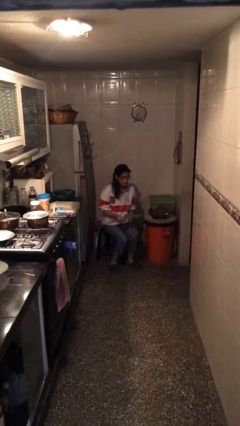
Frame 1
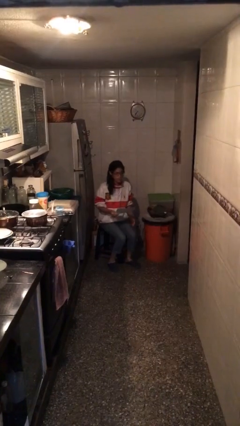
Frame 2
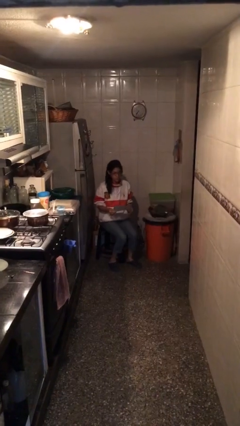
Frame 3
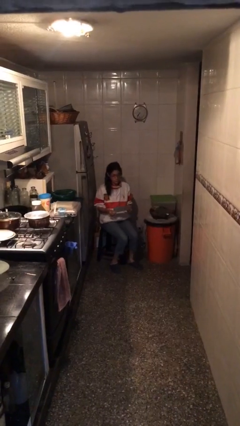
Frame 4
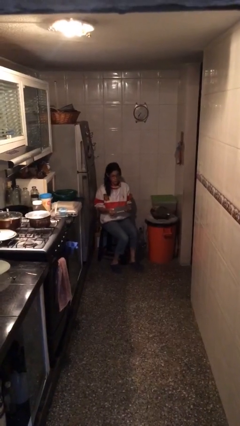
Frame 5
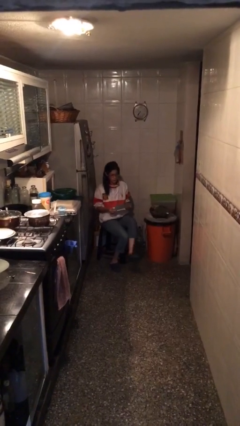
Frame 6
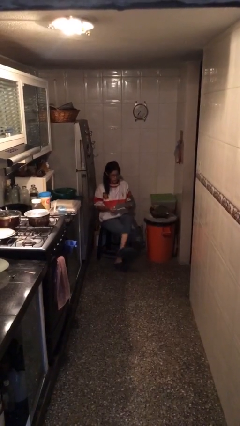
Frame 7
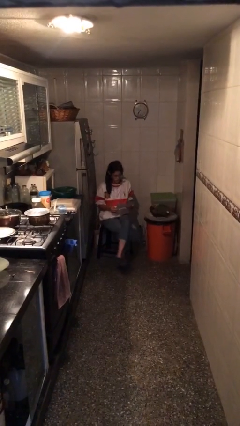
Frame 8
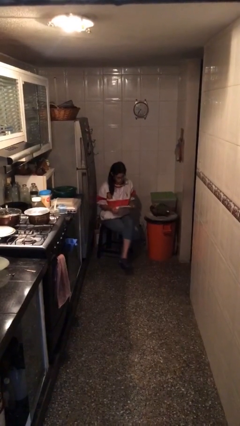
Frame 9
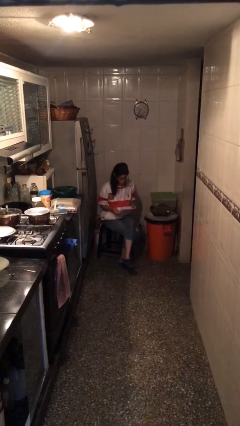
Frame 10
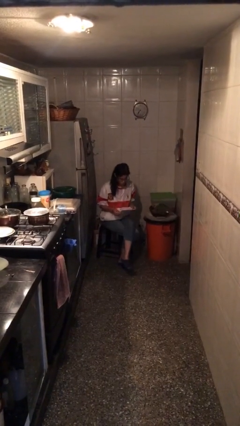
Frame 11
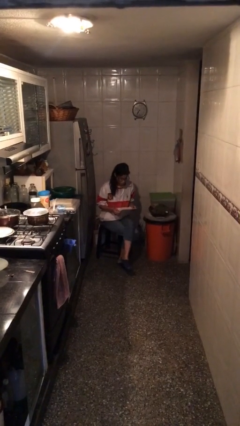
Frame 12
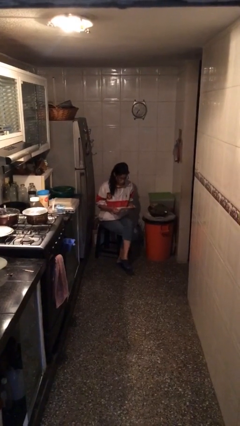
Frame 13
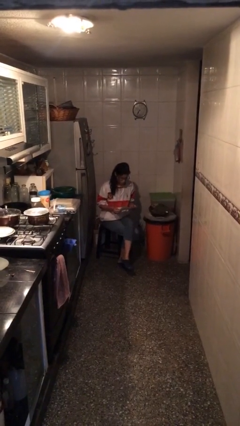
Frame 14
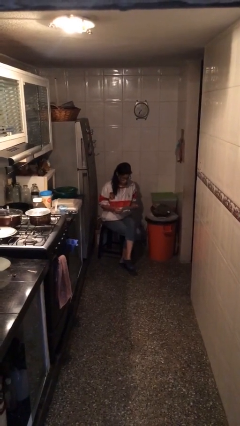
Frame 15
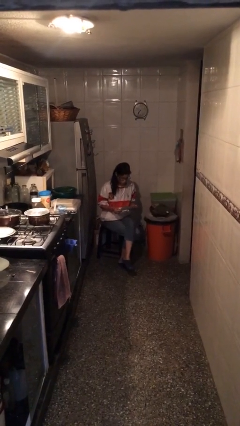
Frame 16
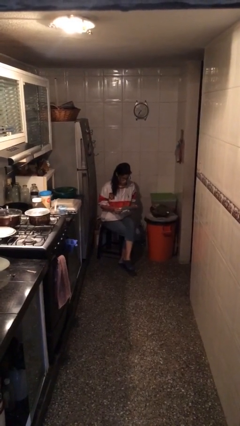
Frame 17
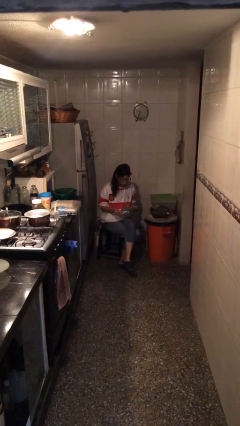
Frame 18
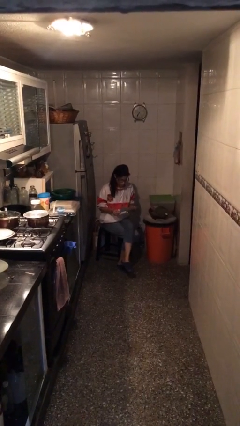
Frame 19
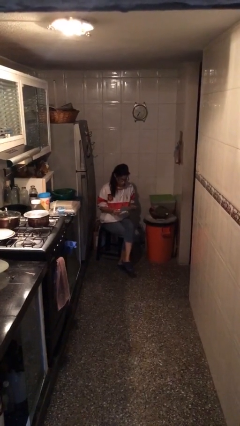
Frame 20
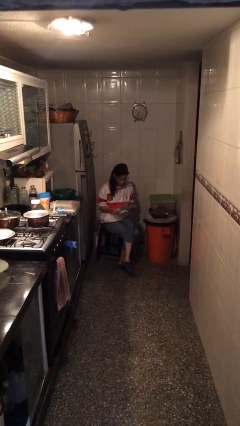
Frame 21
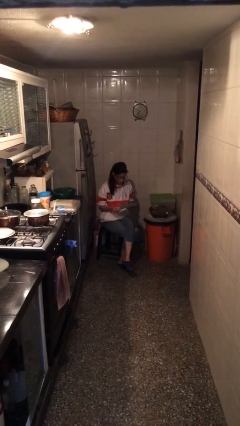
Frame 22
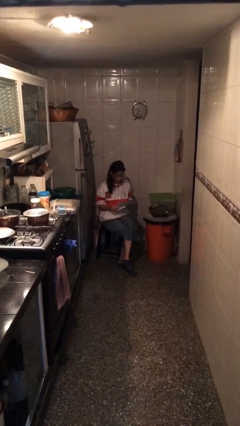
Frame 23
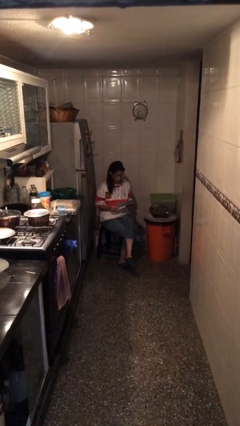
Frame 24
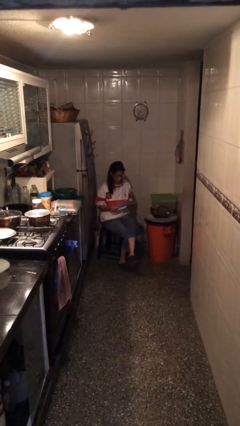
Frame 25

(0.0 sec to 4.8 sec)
person reads document

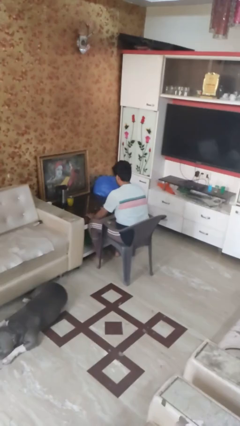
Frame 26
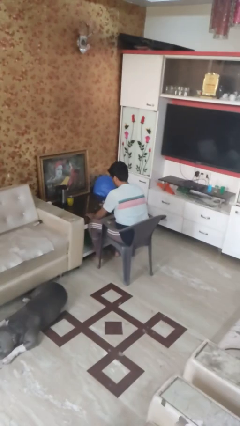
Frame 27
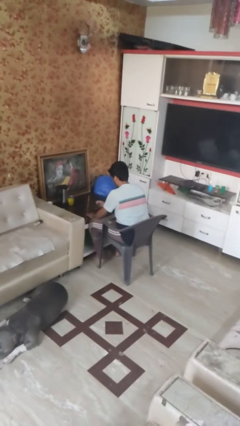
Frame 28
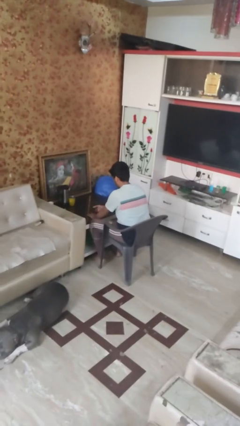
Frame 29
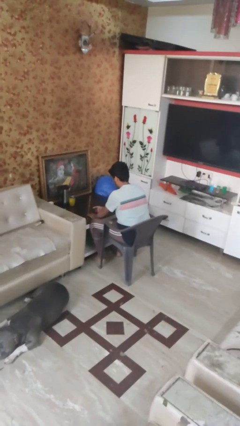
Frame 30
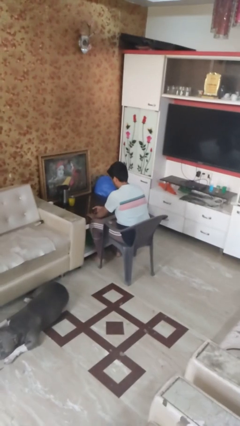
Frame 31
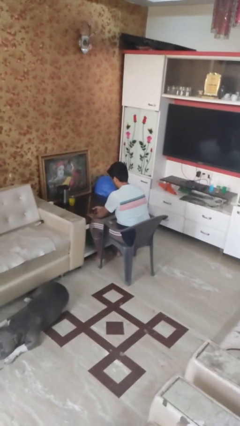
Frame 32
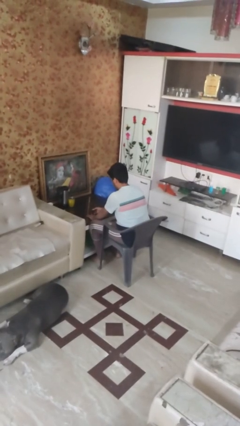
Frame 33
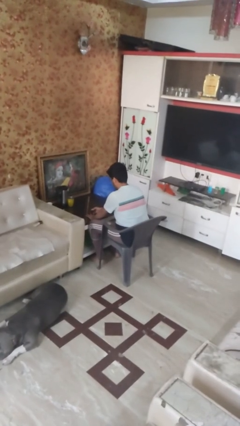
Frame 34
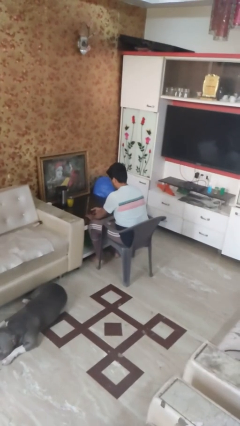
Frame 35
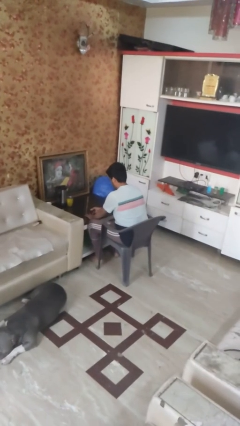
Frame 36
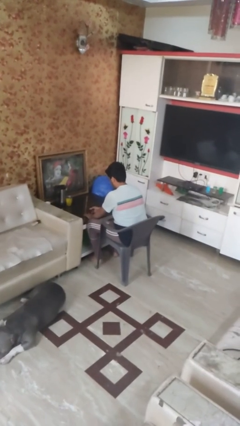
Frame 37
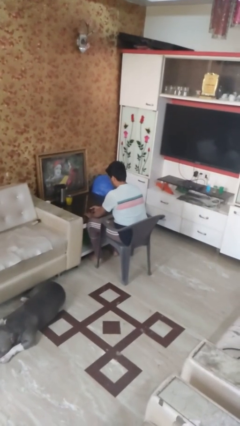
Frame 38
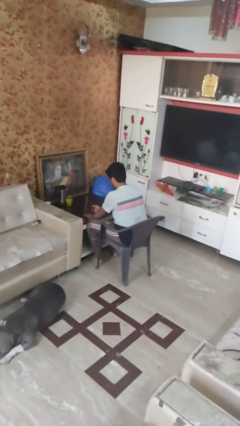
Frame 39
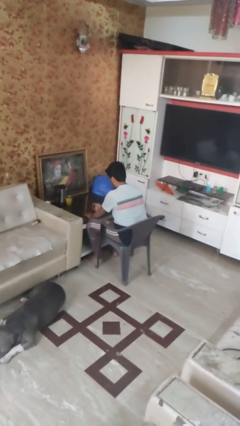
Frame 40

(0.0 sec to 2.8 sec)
person paints fingernails

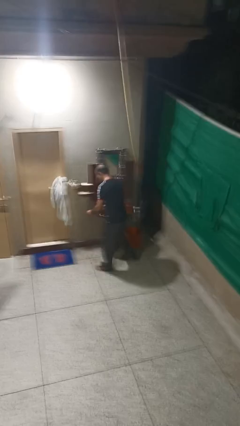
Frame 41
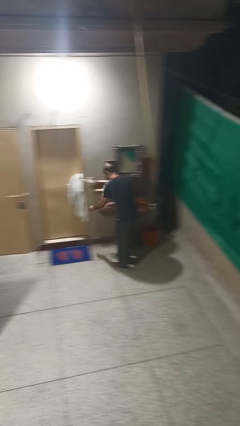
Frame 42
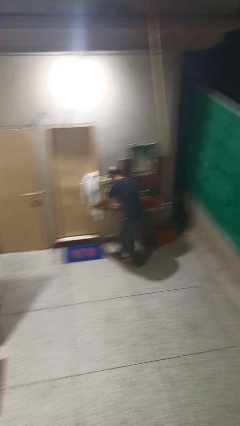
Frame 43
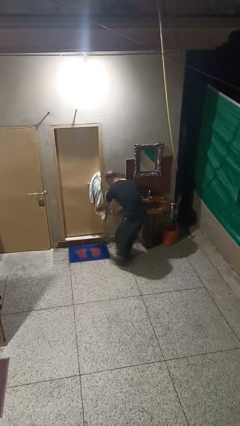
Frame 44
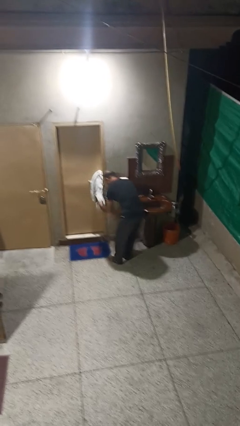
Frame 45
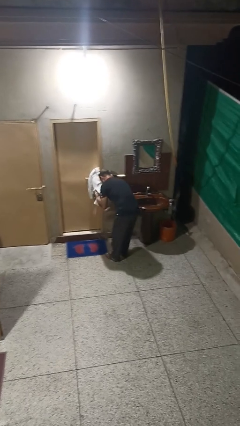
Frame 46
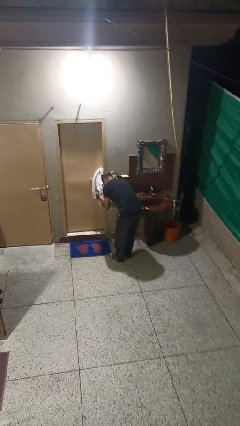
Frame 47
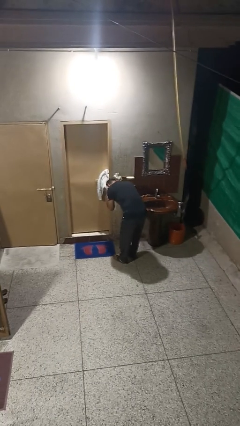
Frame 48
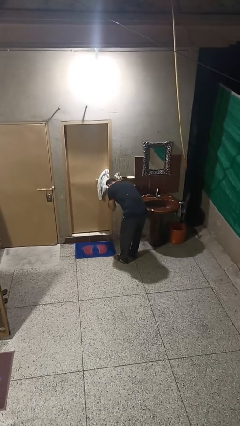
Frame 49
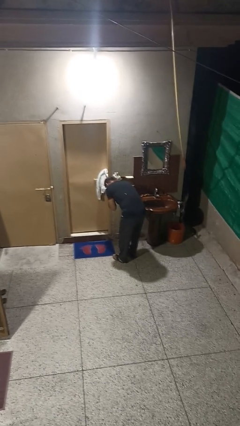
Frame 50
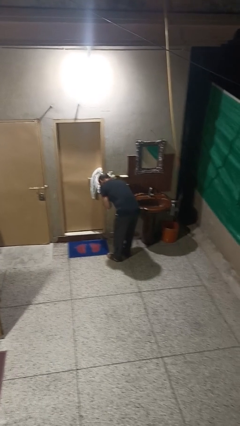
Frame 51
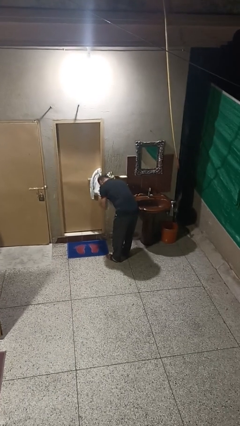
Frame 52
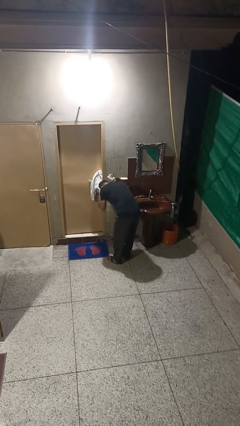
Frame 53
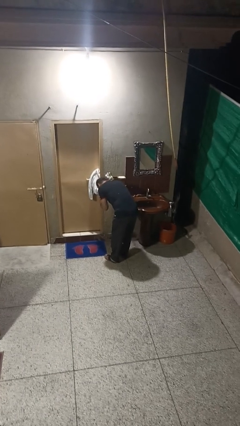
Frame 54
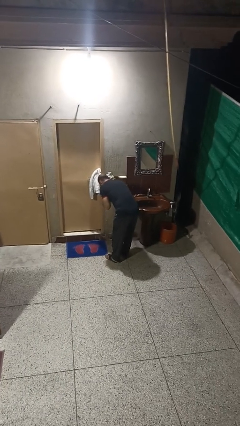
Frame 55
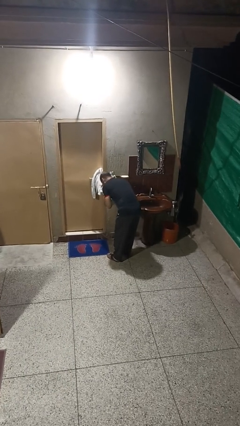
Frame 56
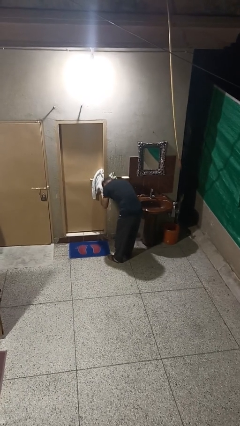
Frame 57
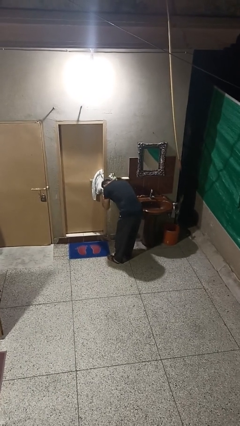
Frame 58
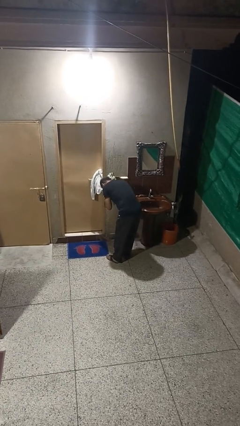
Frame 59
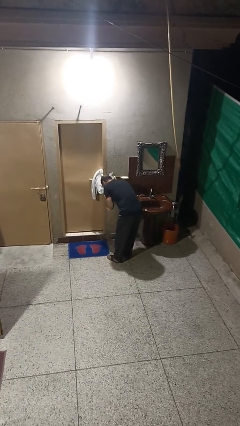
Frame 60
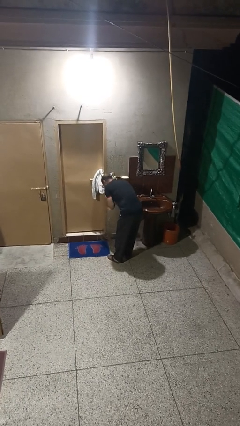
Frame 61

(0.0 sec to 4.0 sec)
person dries face with towel

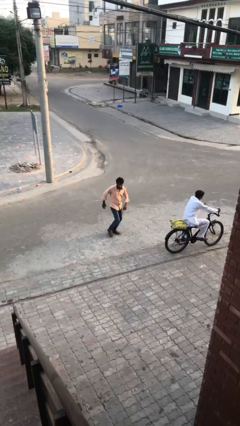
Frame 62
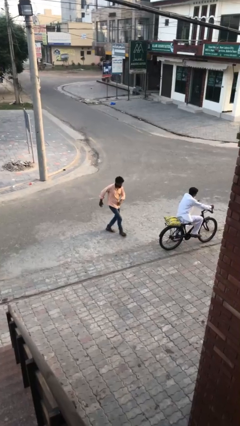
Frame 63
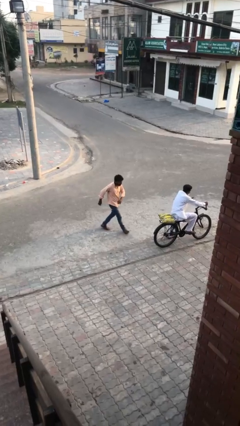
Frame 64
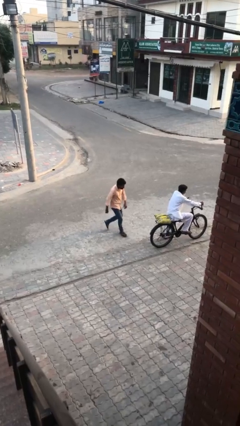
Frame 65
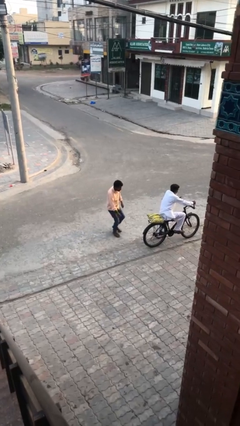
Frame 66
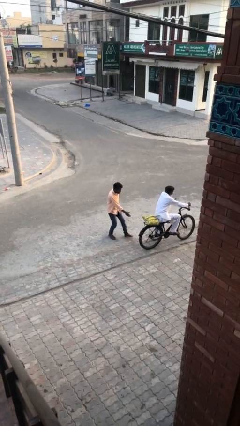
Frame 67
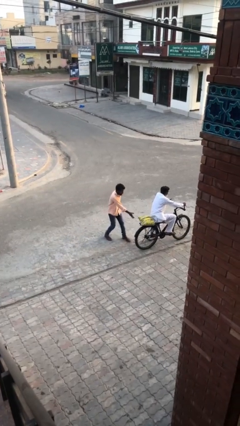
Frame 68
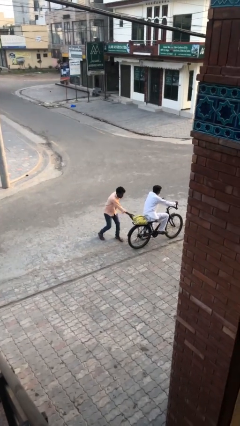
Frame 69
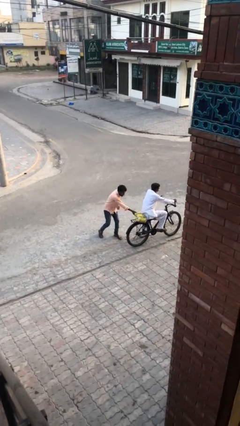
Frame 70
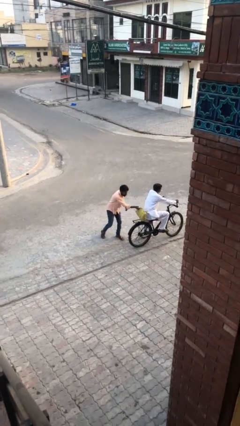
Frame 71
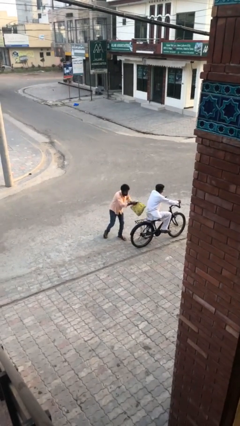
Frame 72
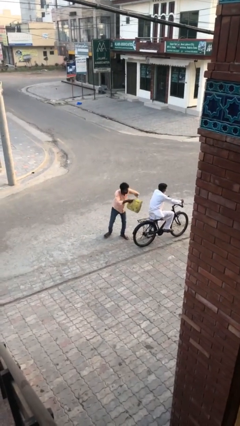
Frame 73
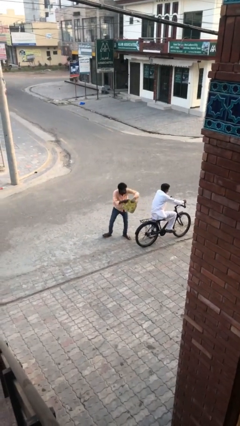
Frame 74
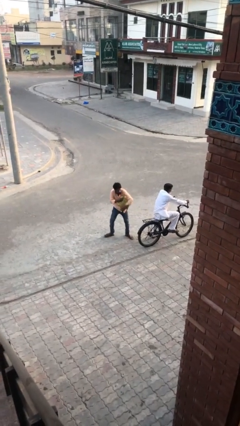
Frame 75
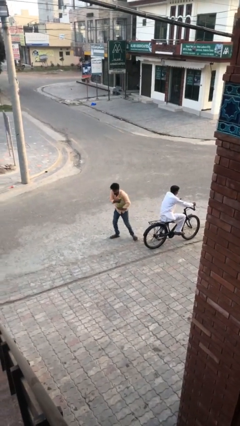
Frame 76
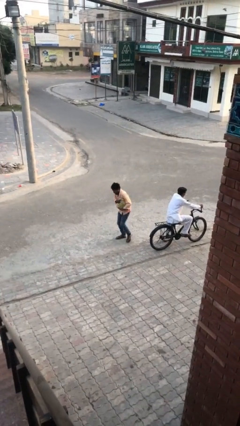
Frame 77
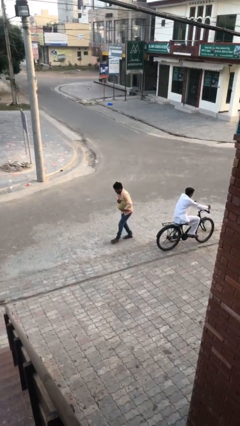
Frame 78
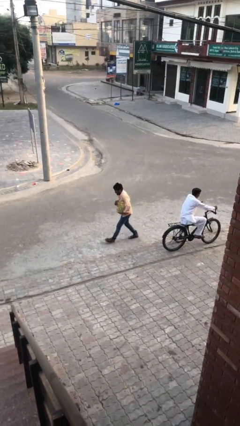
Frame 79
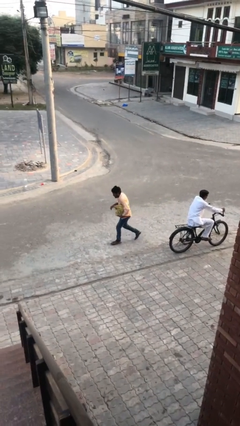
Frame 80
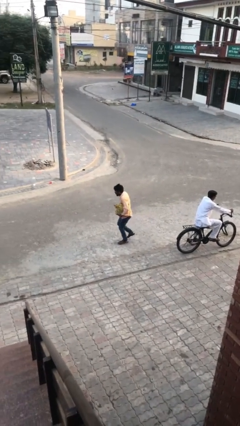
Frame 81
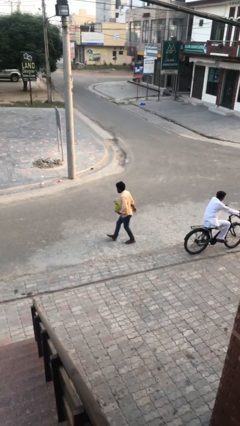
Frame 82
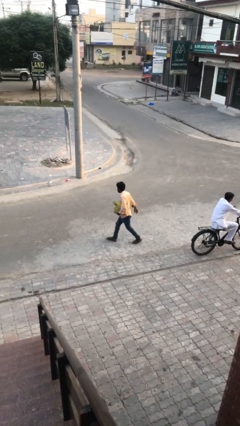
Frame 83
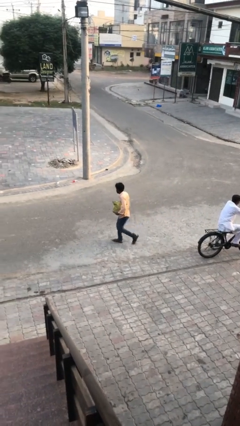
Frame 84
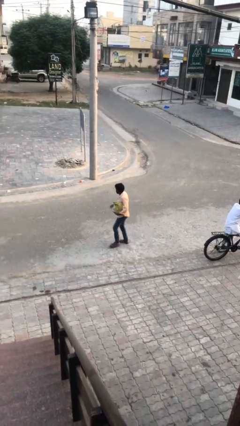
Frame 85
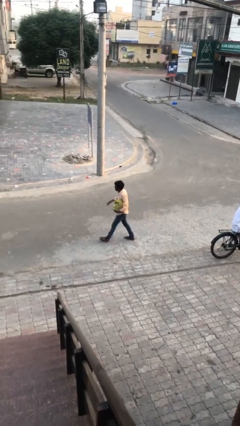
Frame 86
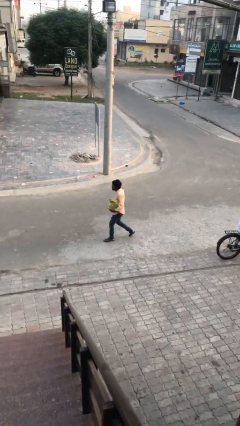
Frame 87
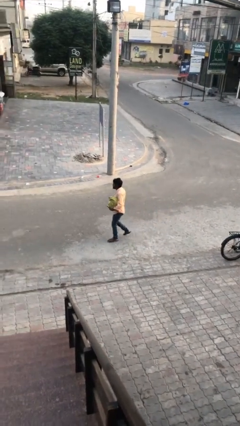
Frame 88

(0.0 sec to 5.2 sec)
person steals object from person

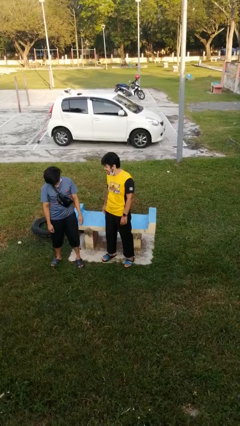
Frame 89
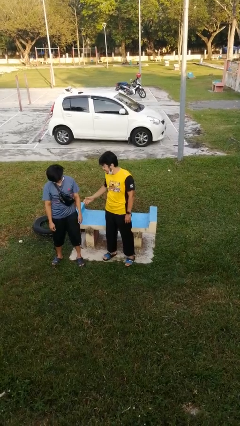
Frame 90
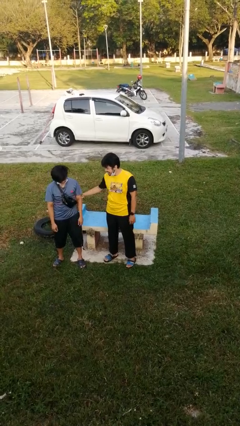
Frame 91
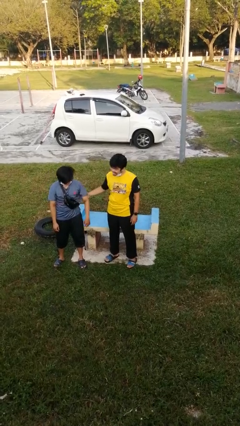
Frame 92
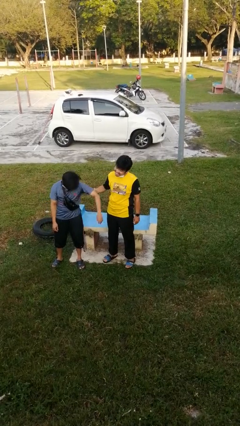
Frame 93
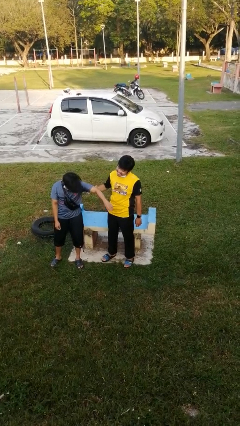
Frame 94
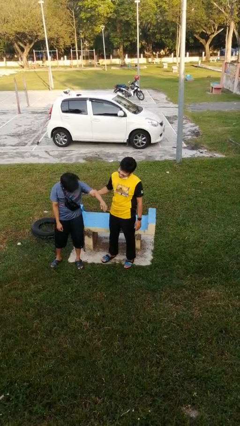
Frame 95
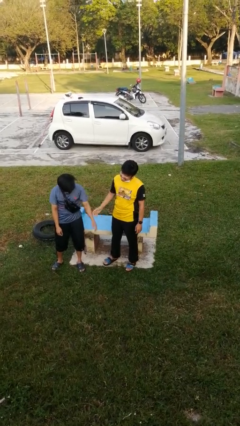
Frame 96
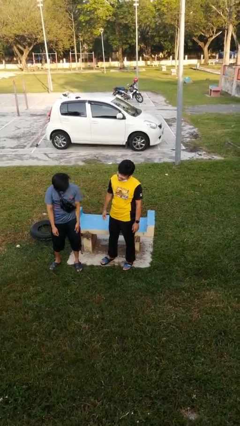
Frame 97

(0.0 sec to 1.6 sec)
person grabs person by bicep
